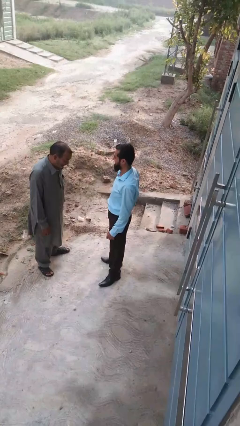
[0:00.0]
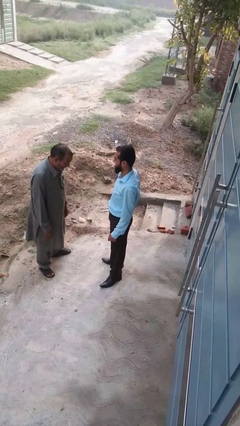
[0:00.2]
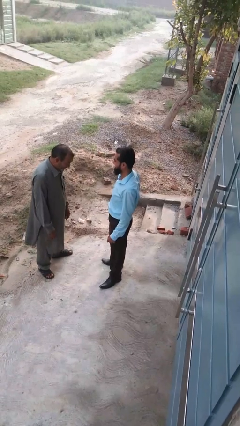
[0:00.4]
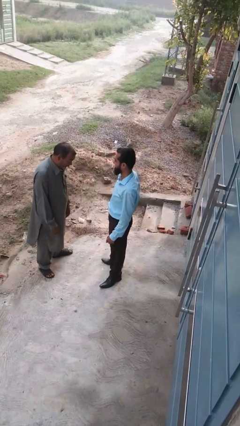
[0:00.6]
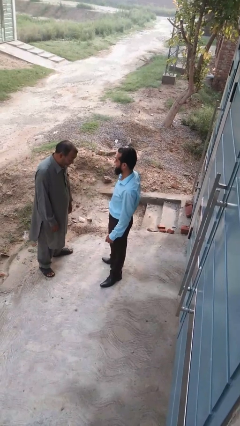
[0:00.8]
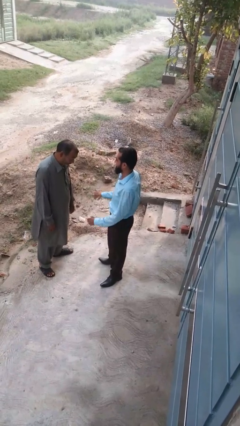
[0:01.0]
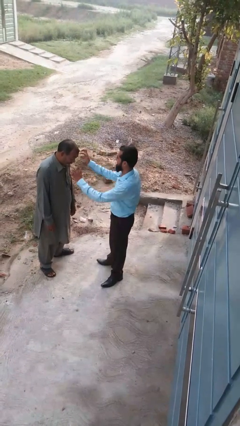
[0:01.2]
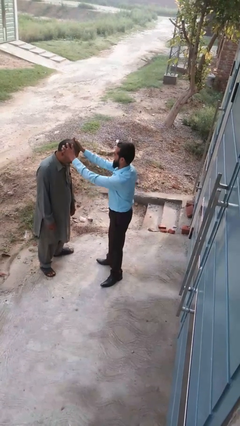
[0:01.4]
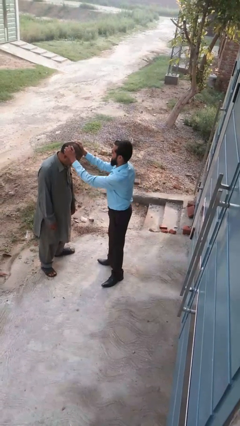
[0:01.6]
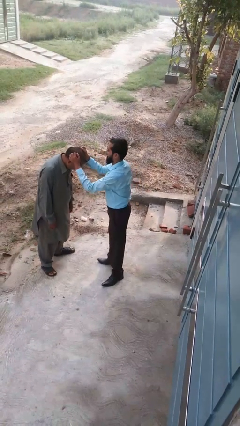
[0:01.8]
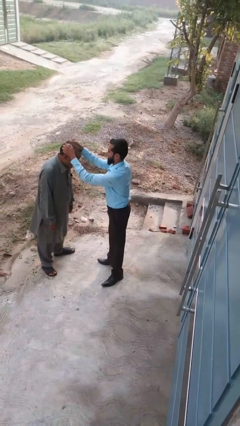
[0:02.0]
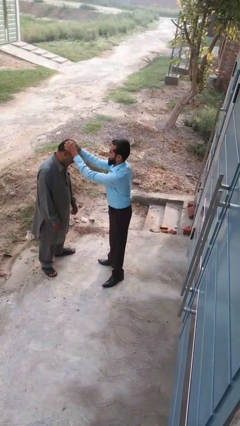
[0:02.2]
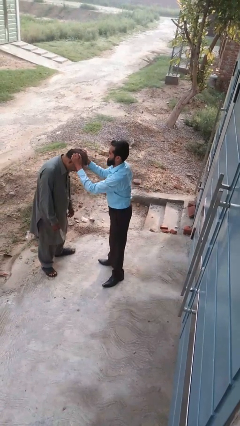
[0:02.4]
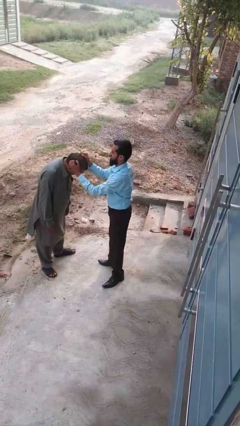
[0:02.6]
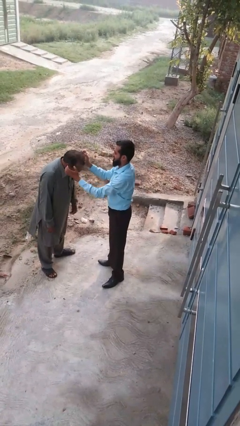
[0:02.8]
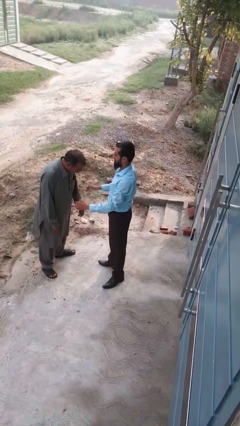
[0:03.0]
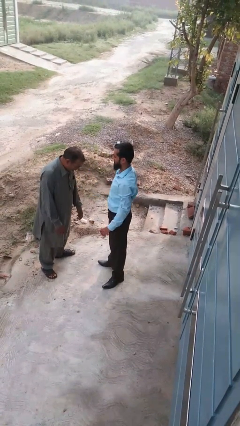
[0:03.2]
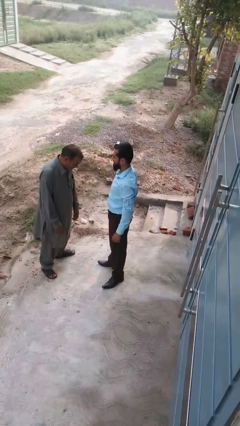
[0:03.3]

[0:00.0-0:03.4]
person grabs person by hair

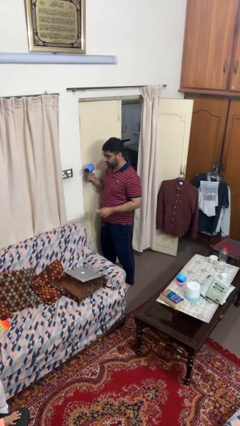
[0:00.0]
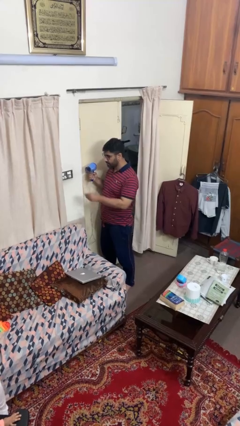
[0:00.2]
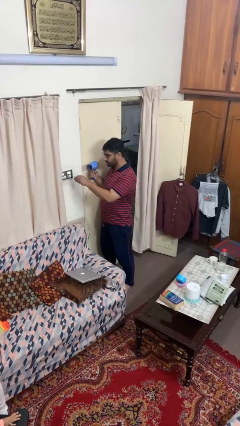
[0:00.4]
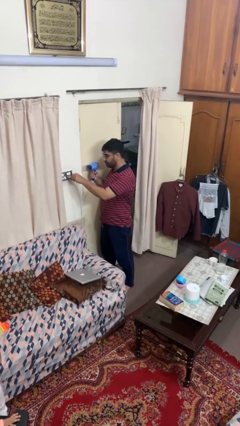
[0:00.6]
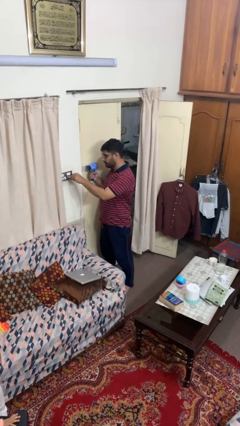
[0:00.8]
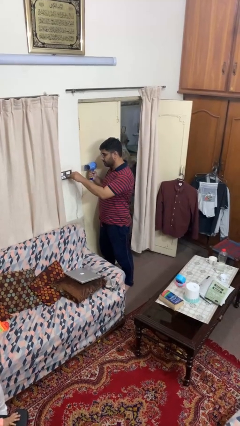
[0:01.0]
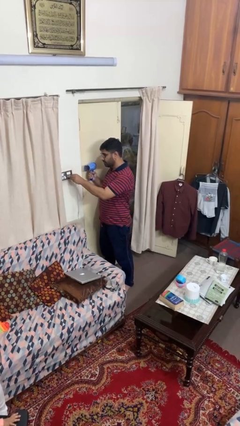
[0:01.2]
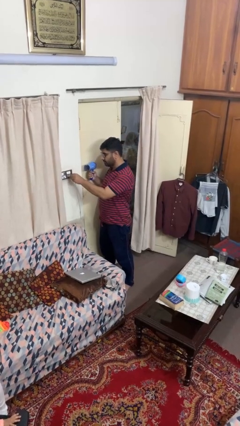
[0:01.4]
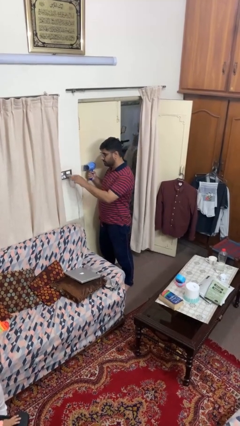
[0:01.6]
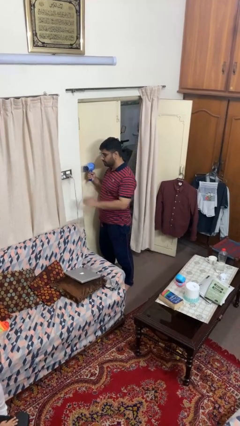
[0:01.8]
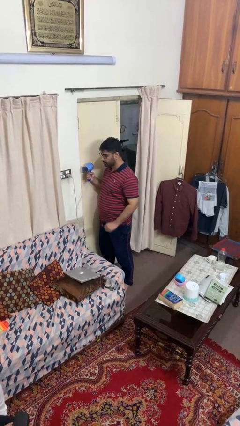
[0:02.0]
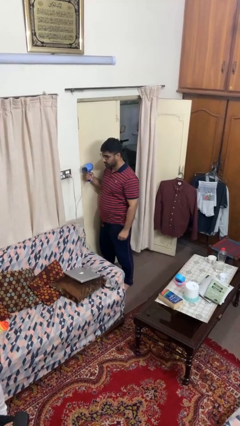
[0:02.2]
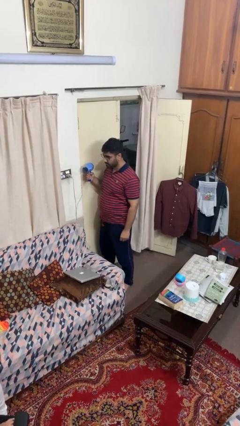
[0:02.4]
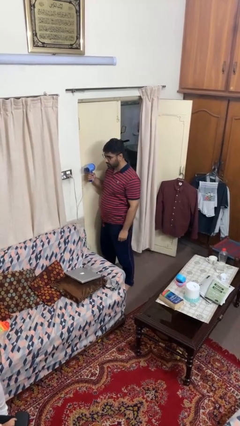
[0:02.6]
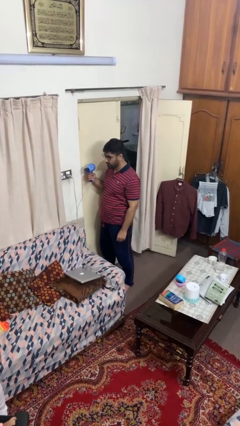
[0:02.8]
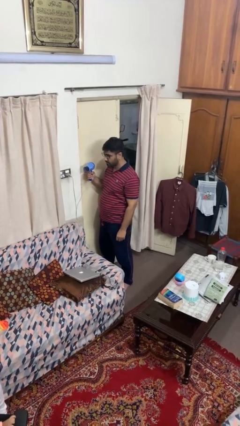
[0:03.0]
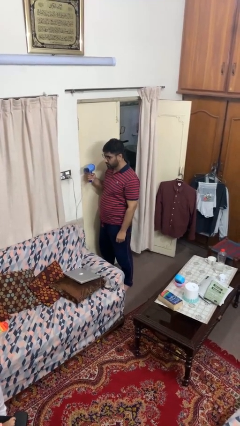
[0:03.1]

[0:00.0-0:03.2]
person plugs into electrical socket

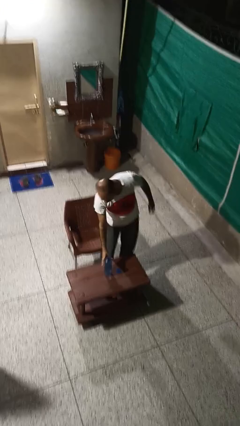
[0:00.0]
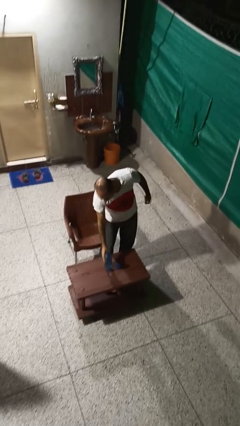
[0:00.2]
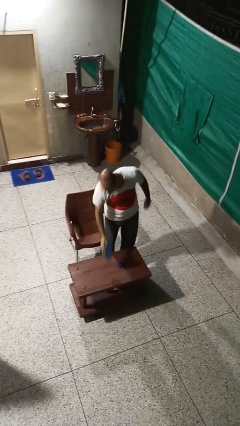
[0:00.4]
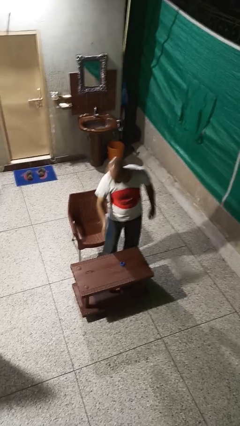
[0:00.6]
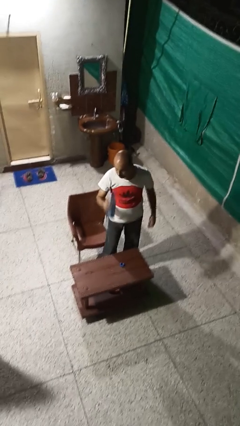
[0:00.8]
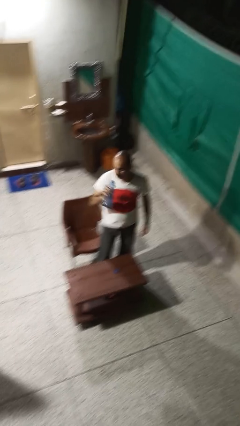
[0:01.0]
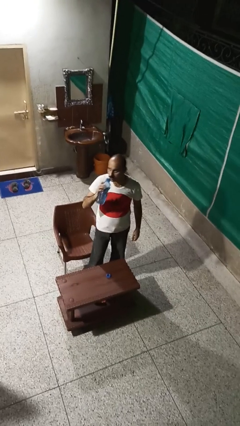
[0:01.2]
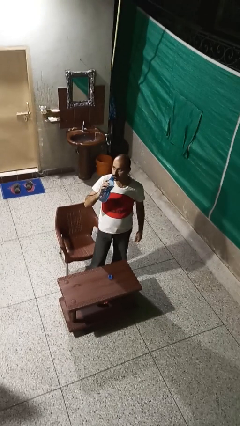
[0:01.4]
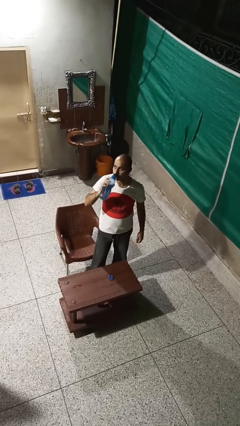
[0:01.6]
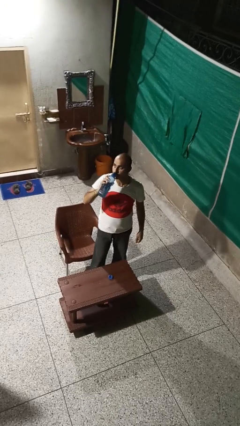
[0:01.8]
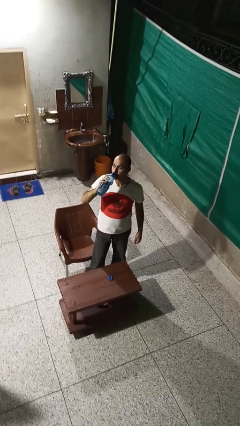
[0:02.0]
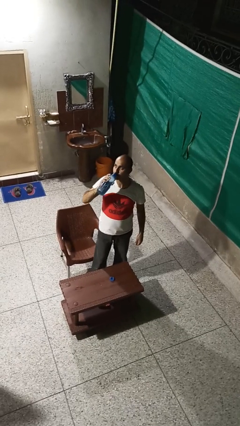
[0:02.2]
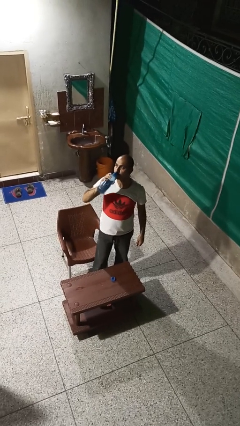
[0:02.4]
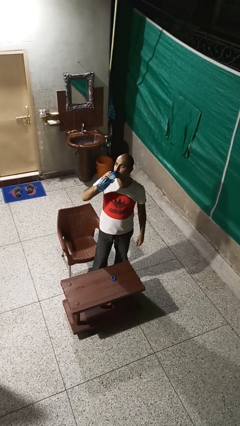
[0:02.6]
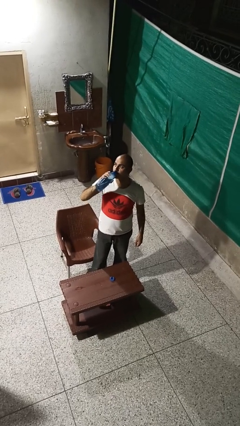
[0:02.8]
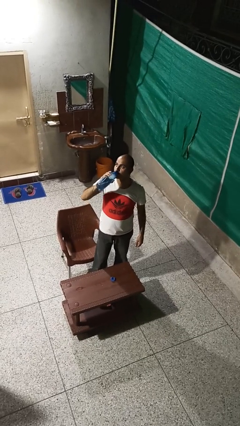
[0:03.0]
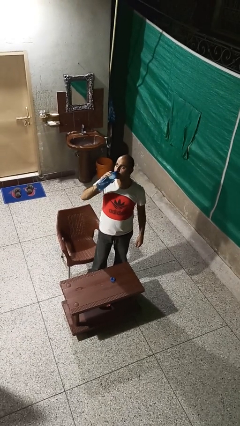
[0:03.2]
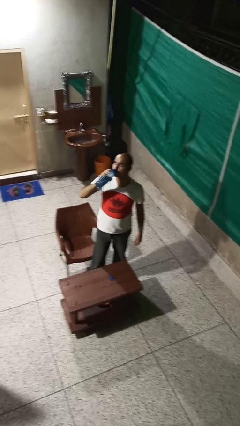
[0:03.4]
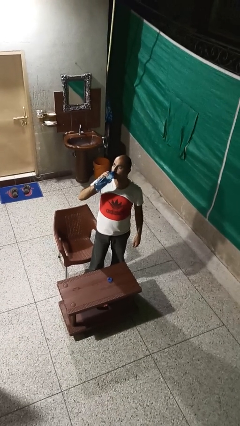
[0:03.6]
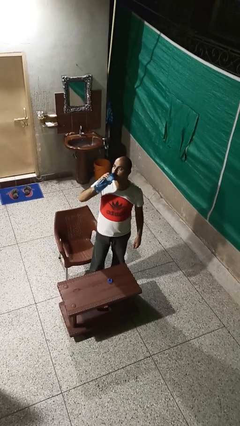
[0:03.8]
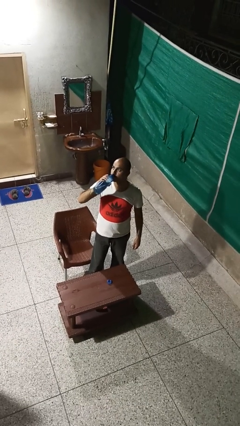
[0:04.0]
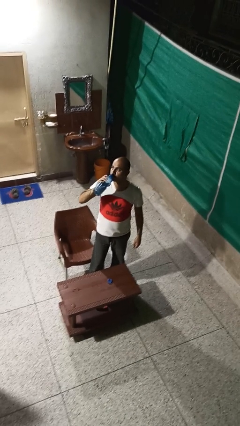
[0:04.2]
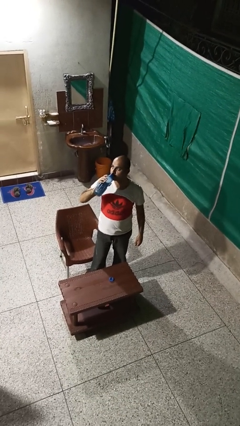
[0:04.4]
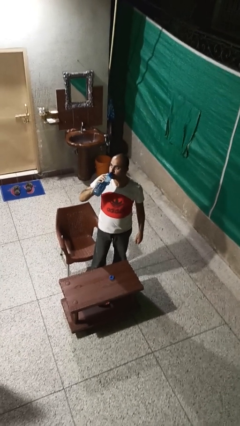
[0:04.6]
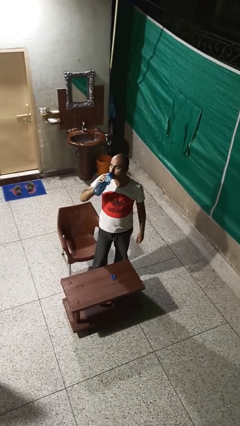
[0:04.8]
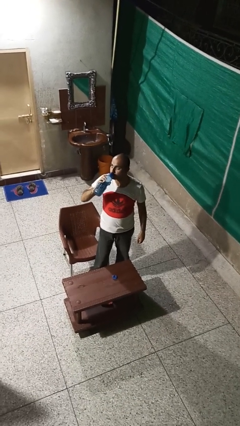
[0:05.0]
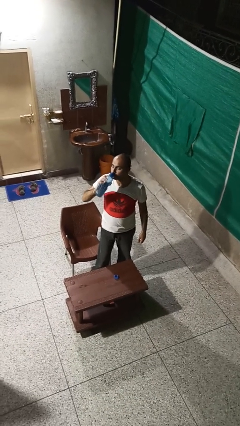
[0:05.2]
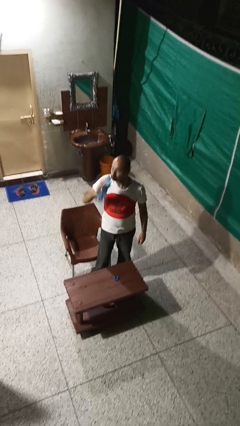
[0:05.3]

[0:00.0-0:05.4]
person drinks from bottle

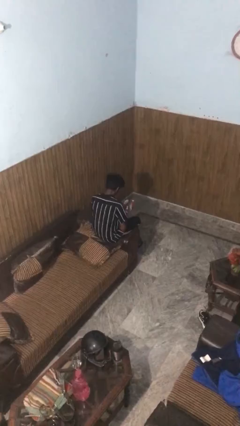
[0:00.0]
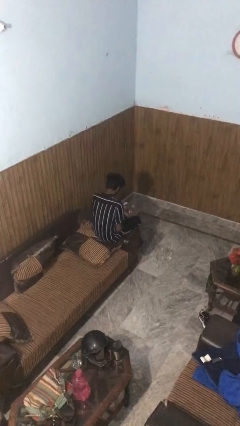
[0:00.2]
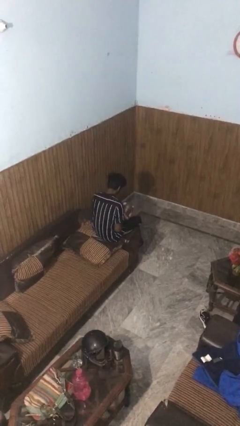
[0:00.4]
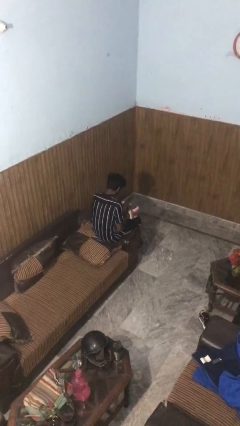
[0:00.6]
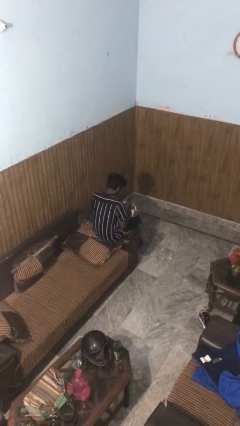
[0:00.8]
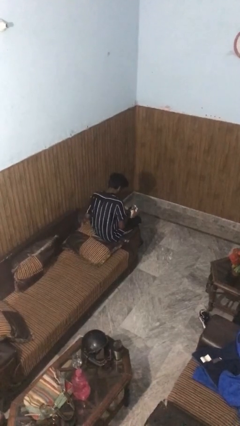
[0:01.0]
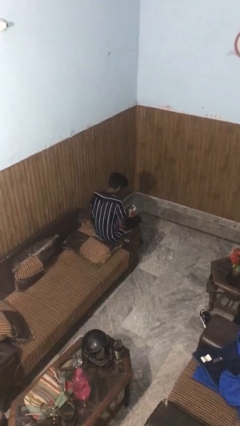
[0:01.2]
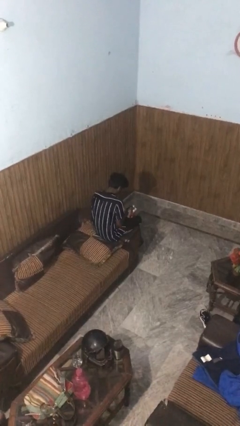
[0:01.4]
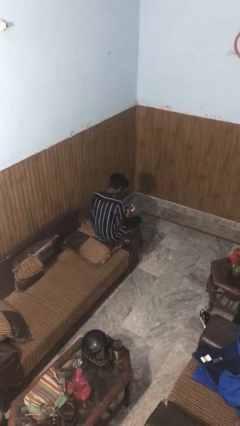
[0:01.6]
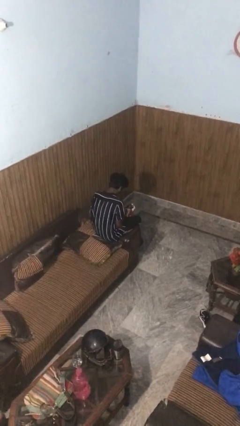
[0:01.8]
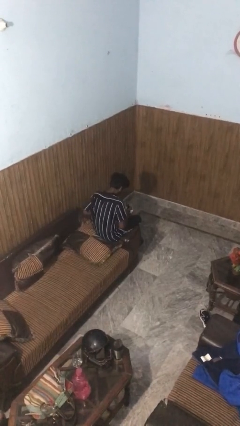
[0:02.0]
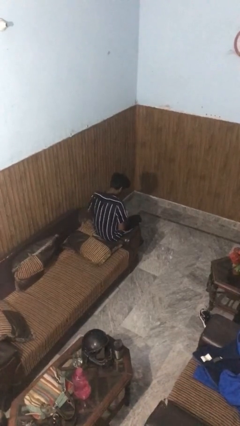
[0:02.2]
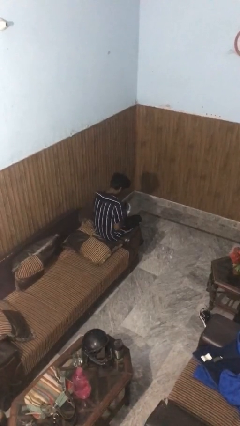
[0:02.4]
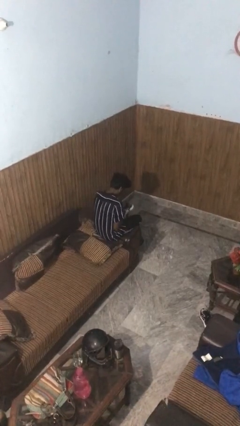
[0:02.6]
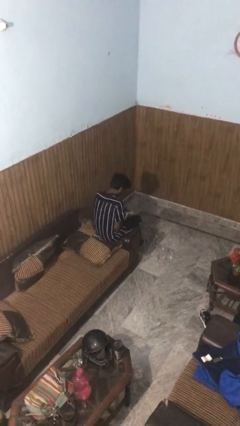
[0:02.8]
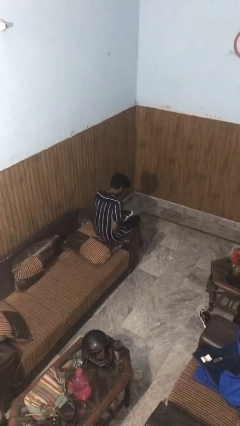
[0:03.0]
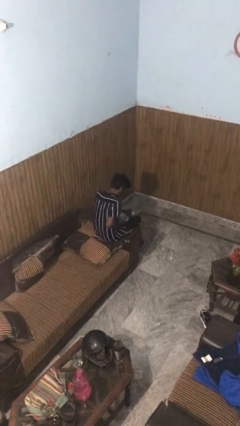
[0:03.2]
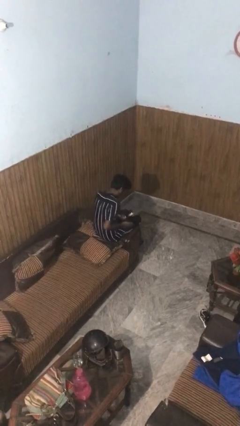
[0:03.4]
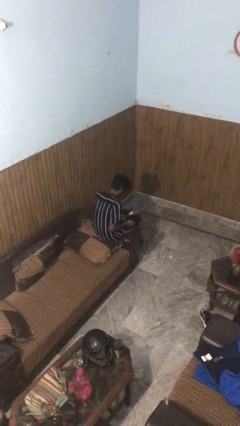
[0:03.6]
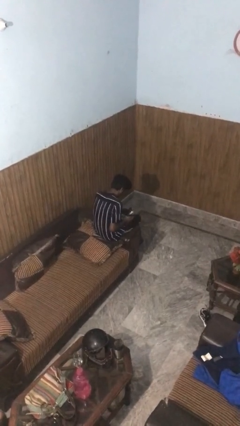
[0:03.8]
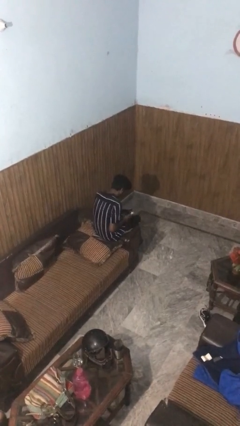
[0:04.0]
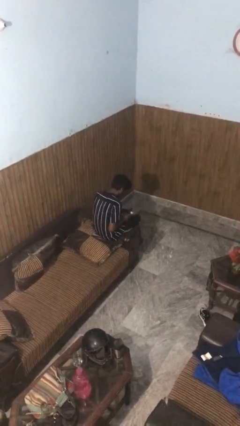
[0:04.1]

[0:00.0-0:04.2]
person takes off gloves

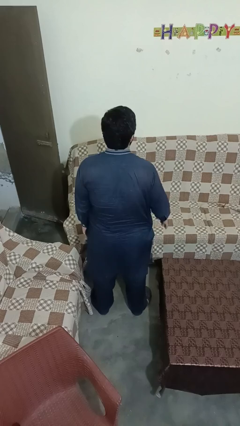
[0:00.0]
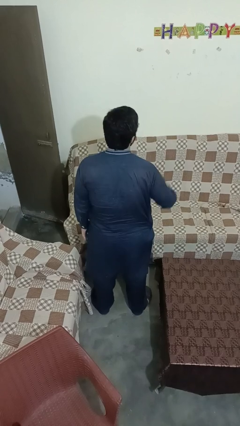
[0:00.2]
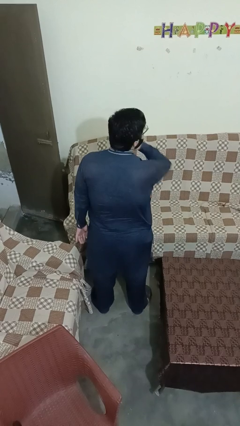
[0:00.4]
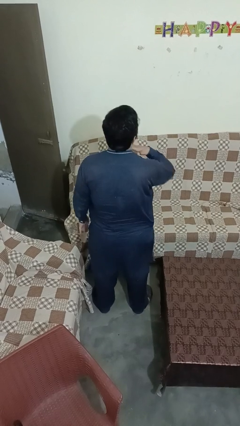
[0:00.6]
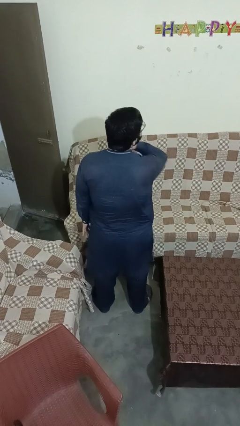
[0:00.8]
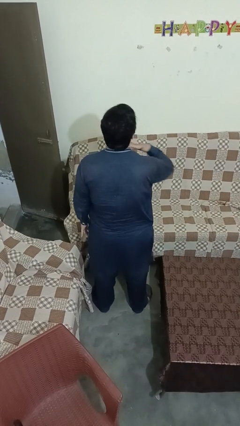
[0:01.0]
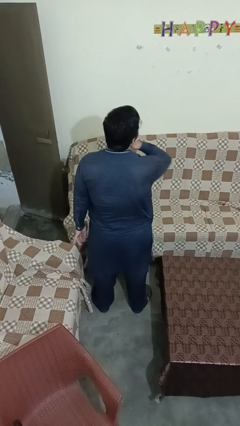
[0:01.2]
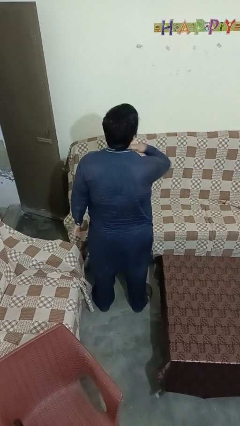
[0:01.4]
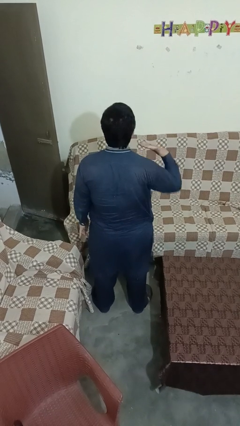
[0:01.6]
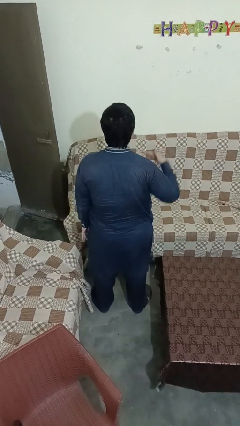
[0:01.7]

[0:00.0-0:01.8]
person gestures cut
